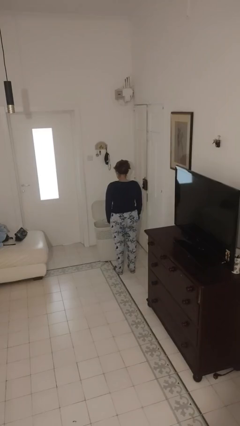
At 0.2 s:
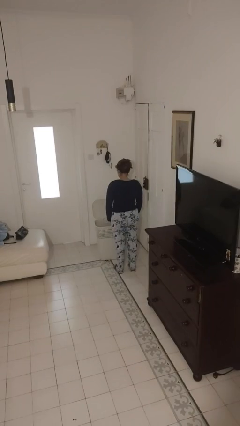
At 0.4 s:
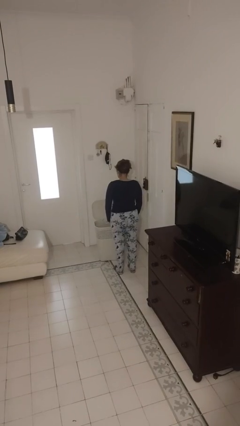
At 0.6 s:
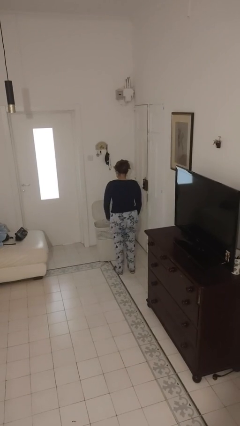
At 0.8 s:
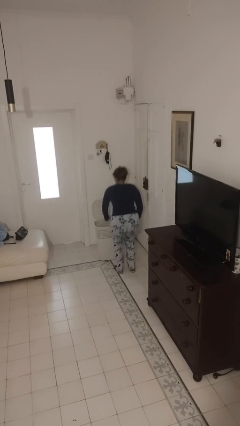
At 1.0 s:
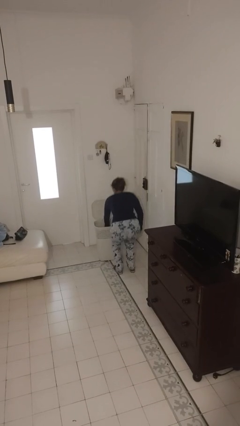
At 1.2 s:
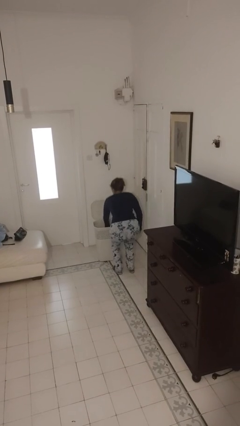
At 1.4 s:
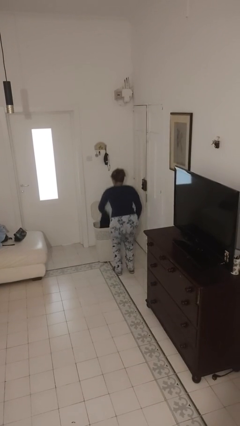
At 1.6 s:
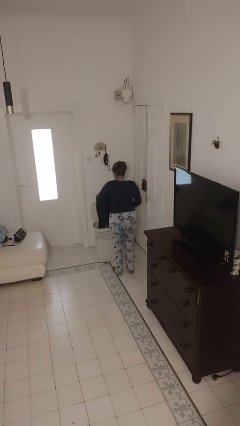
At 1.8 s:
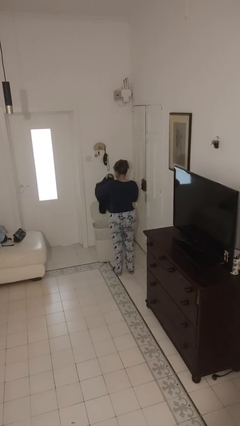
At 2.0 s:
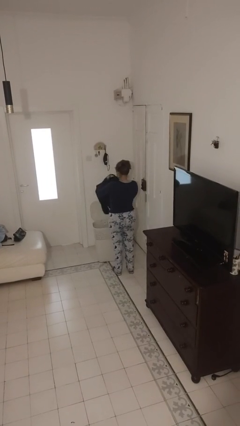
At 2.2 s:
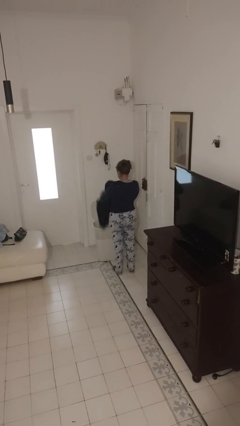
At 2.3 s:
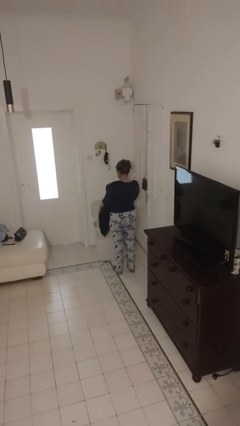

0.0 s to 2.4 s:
person takes object from basket

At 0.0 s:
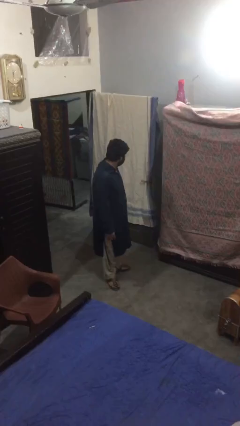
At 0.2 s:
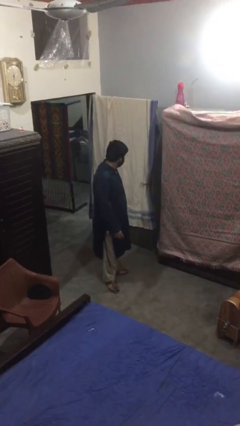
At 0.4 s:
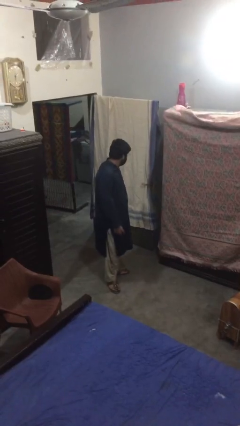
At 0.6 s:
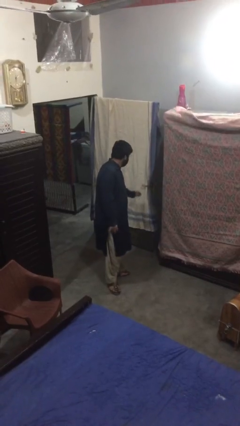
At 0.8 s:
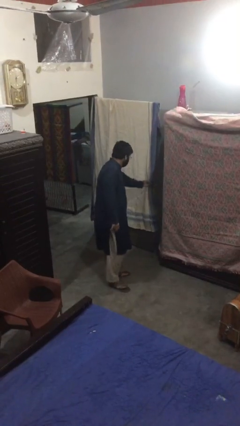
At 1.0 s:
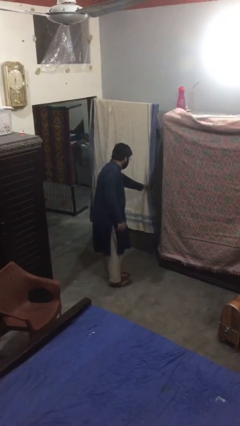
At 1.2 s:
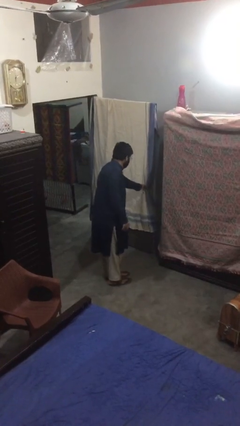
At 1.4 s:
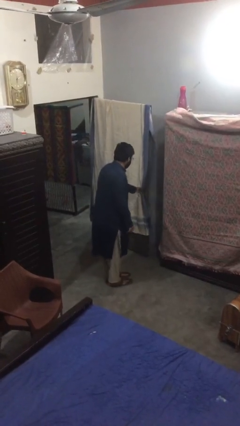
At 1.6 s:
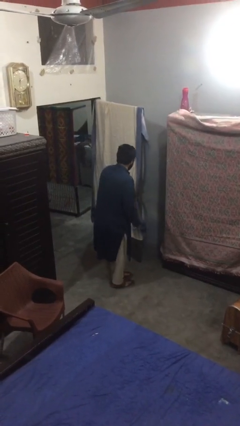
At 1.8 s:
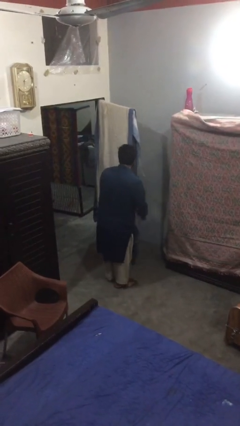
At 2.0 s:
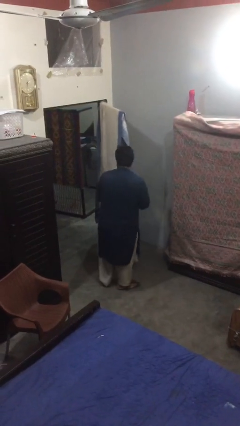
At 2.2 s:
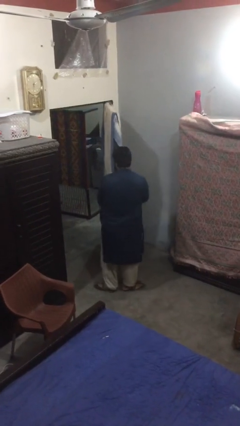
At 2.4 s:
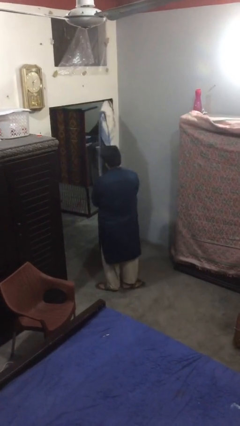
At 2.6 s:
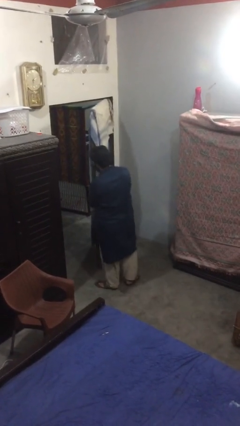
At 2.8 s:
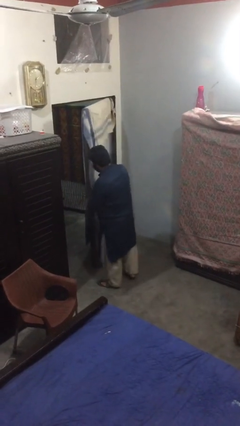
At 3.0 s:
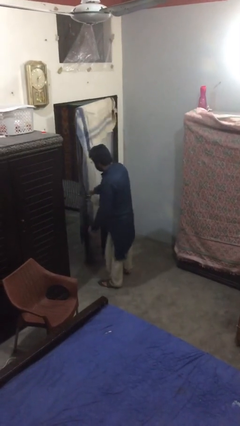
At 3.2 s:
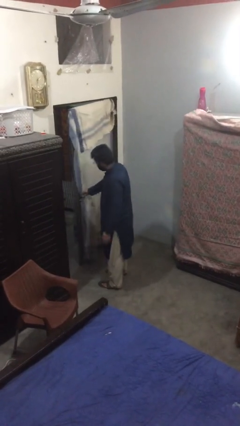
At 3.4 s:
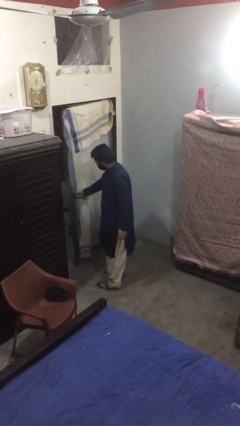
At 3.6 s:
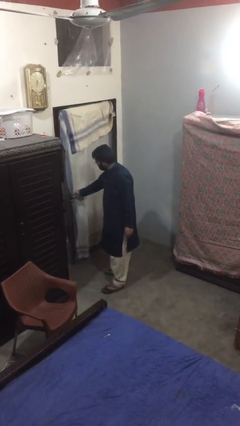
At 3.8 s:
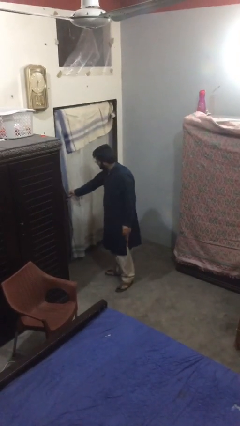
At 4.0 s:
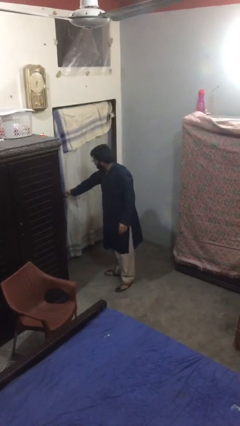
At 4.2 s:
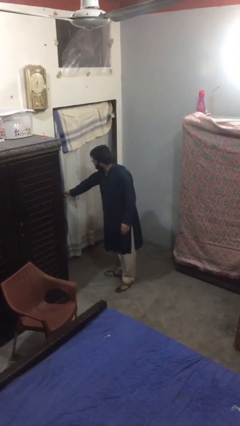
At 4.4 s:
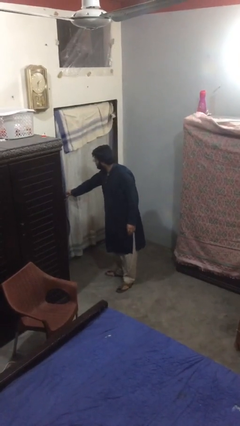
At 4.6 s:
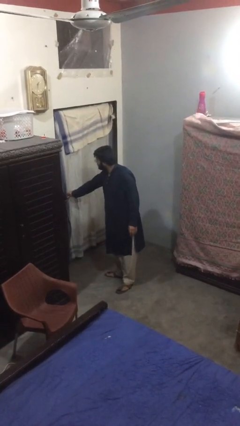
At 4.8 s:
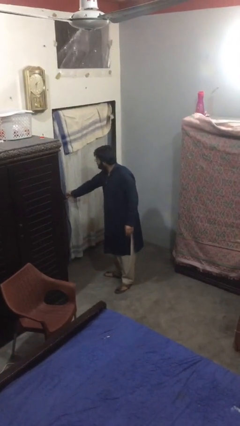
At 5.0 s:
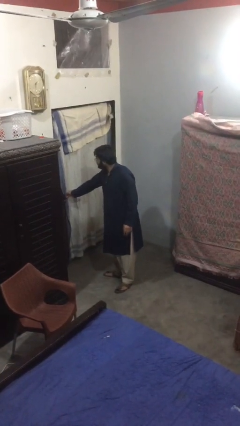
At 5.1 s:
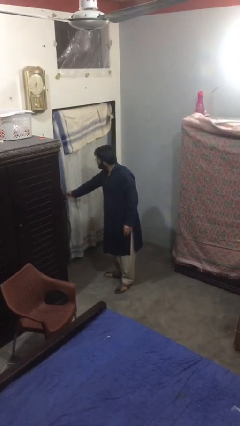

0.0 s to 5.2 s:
person closes facility door

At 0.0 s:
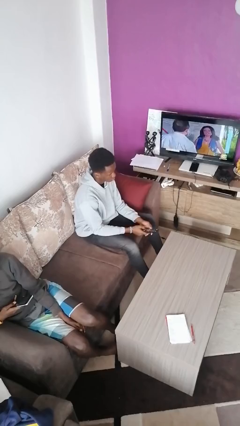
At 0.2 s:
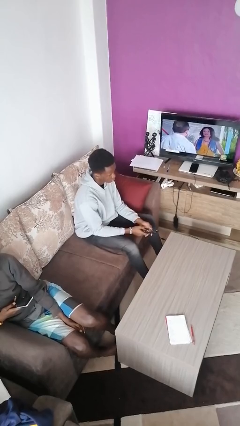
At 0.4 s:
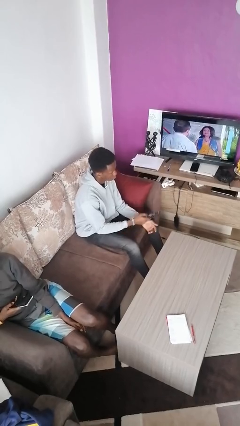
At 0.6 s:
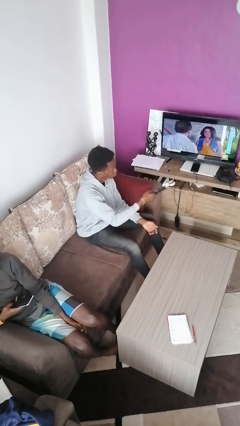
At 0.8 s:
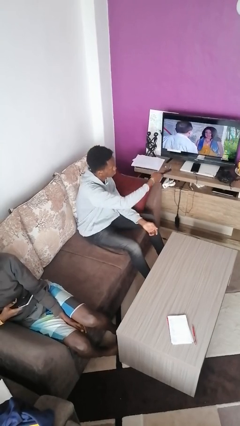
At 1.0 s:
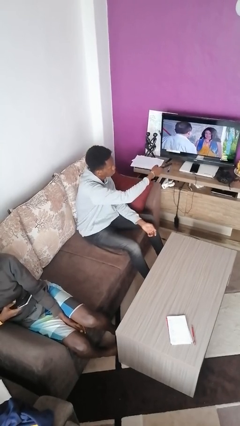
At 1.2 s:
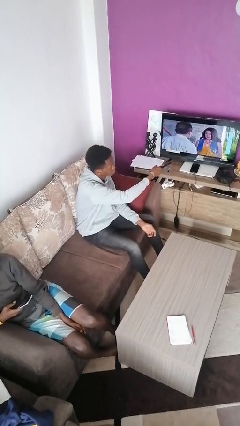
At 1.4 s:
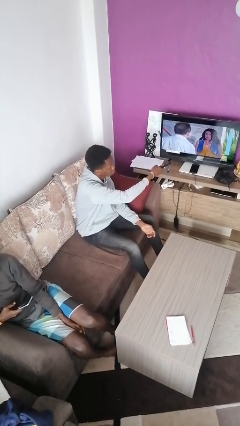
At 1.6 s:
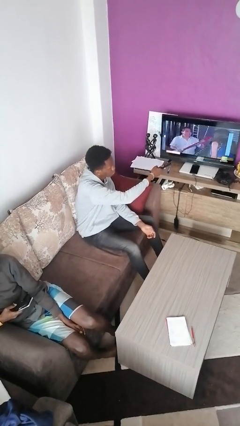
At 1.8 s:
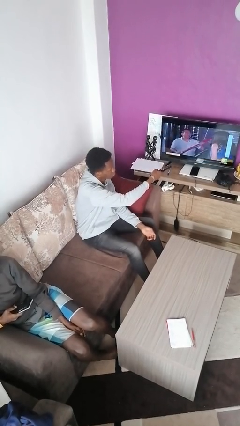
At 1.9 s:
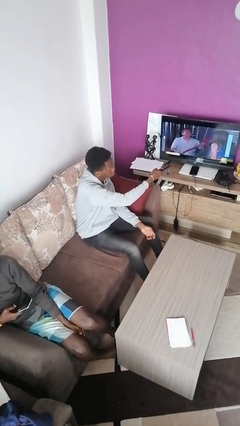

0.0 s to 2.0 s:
person uses television remote

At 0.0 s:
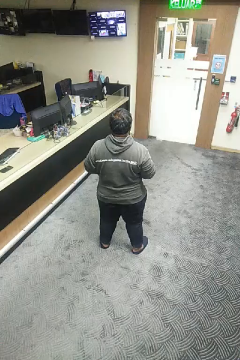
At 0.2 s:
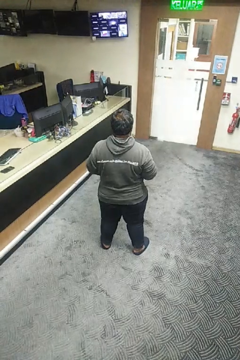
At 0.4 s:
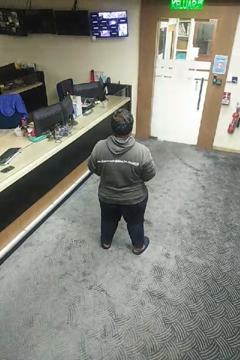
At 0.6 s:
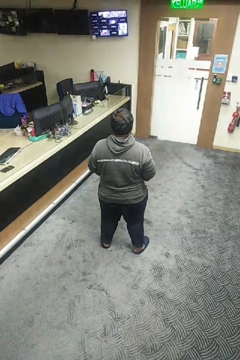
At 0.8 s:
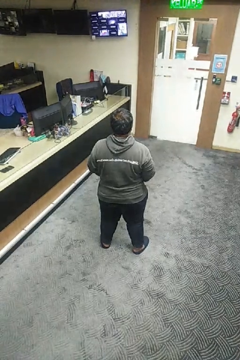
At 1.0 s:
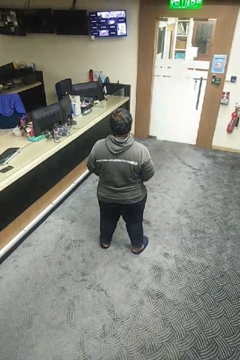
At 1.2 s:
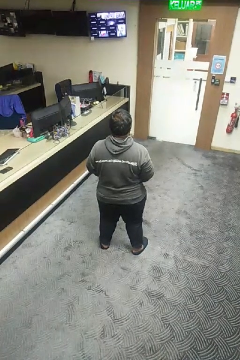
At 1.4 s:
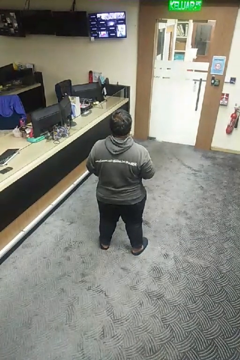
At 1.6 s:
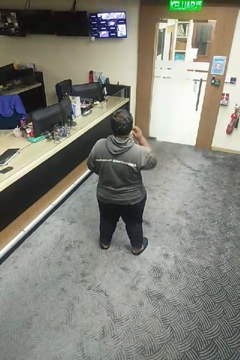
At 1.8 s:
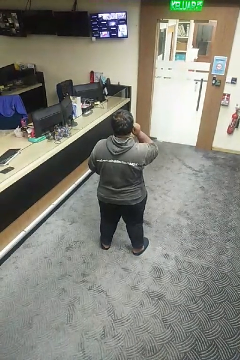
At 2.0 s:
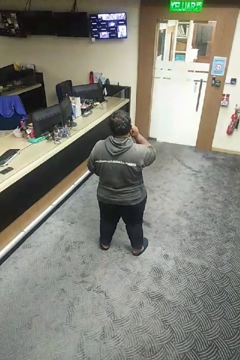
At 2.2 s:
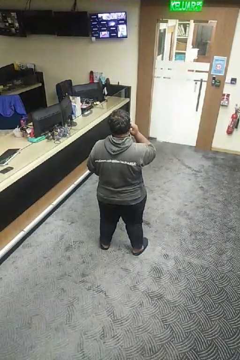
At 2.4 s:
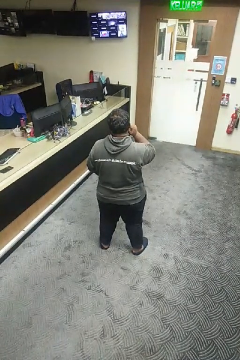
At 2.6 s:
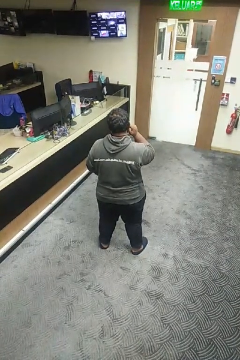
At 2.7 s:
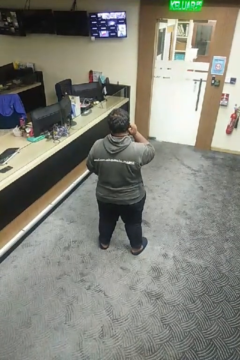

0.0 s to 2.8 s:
person touches earlobe

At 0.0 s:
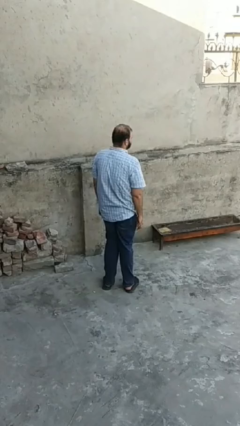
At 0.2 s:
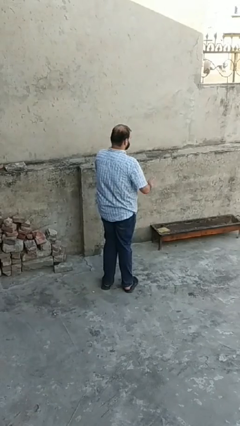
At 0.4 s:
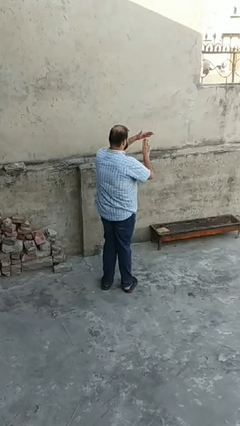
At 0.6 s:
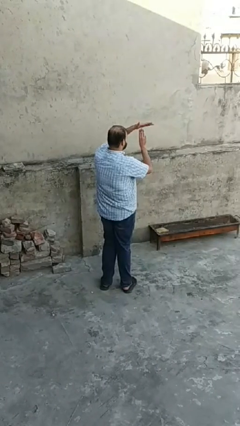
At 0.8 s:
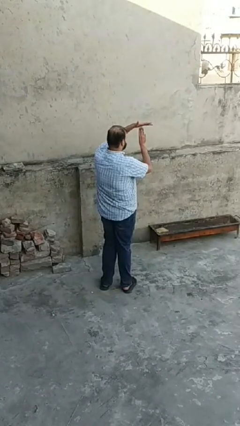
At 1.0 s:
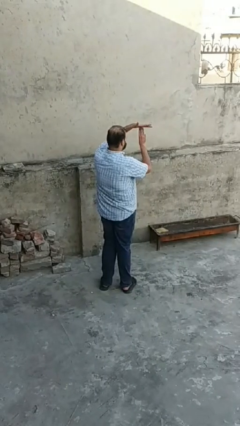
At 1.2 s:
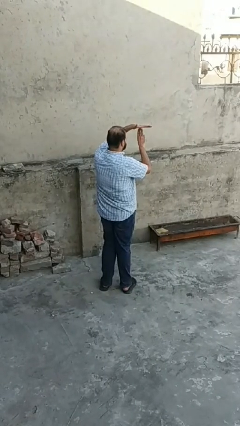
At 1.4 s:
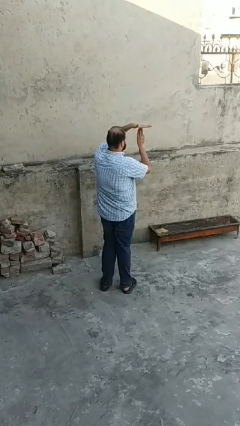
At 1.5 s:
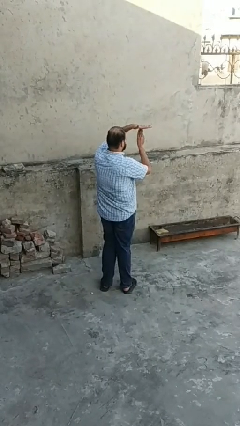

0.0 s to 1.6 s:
person gestures hang loose

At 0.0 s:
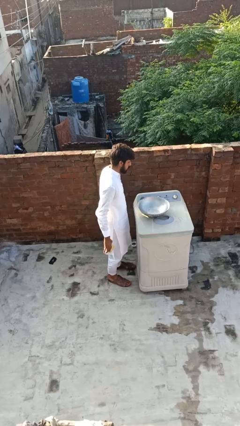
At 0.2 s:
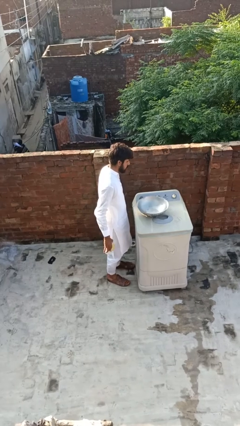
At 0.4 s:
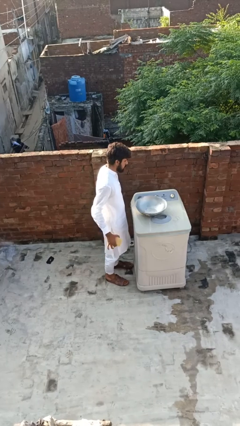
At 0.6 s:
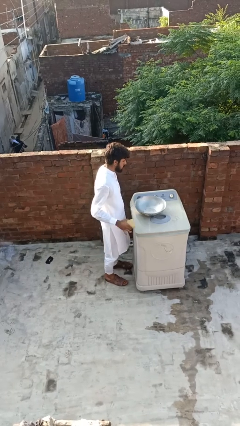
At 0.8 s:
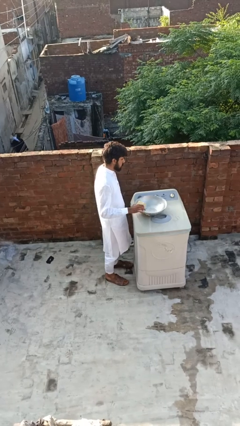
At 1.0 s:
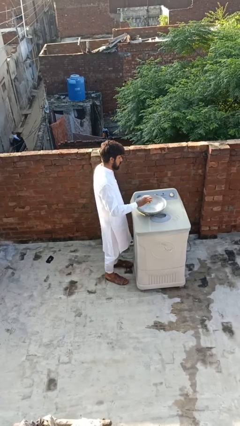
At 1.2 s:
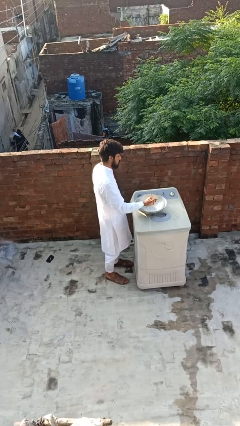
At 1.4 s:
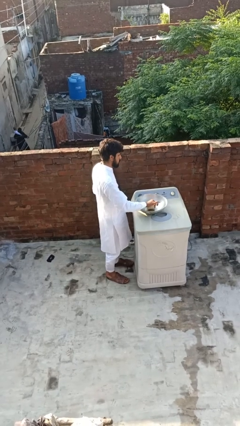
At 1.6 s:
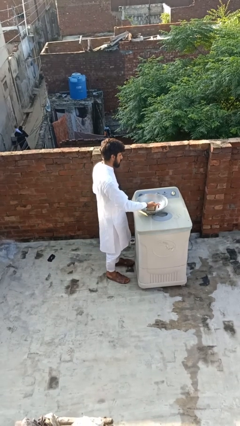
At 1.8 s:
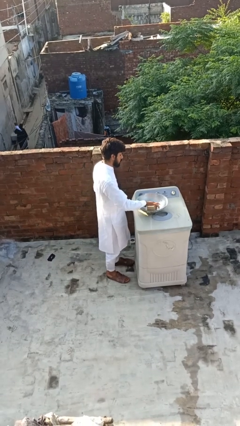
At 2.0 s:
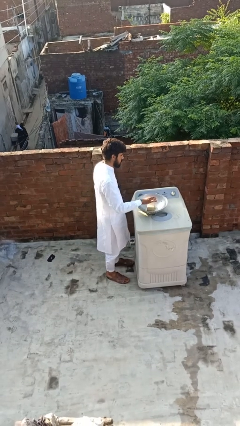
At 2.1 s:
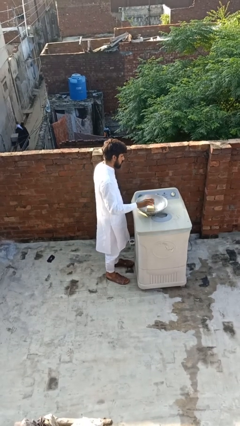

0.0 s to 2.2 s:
person pours into bowl

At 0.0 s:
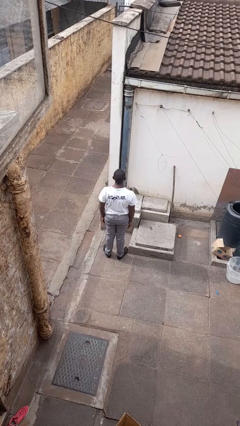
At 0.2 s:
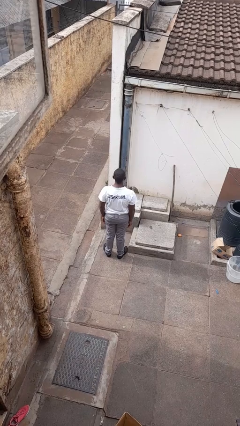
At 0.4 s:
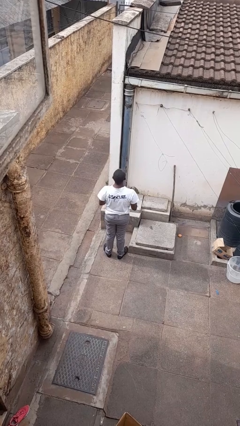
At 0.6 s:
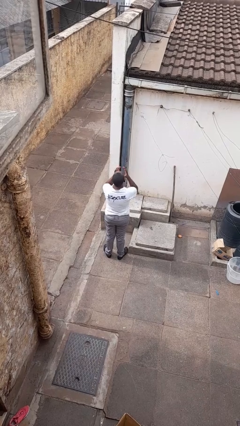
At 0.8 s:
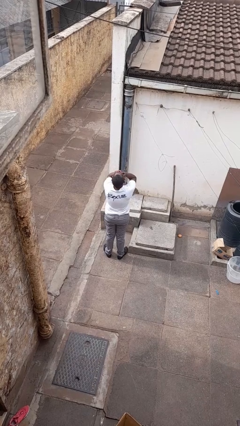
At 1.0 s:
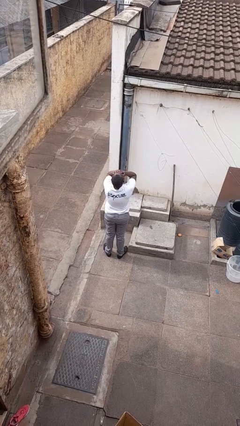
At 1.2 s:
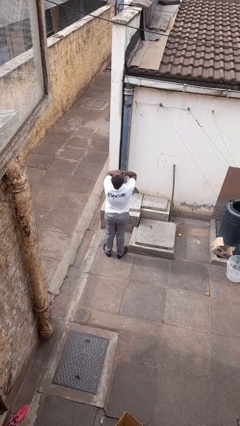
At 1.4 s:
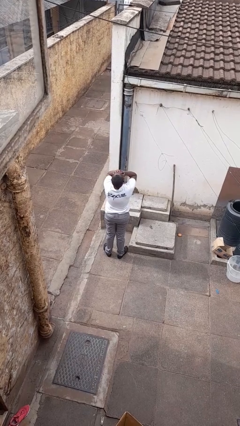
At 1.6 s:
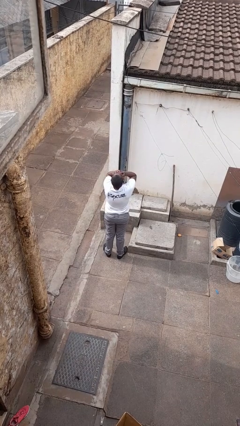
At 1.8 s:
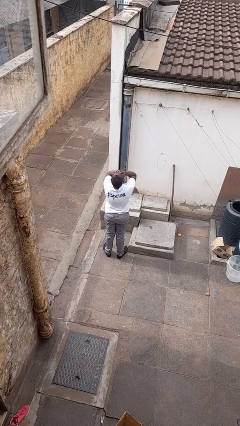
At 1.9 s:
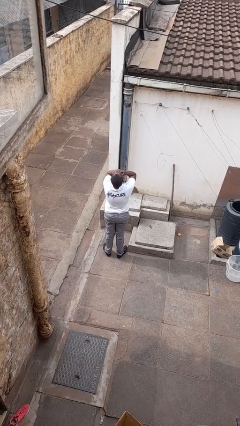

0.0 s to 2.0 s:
person covers face with hands
